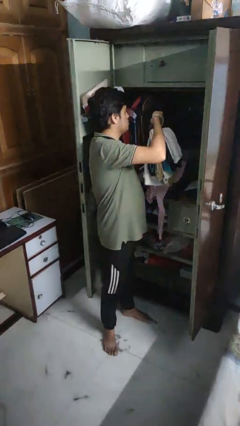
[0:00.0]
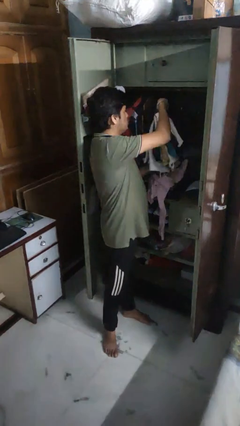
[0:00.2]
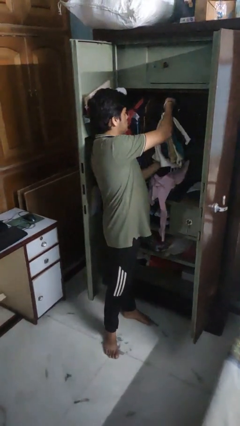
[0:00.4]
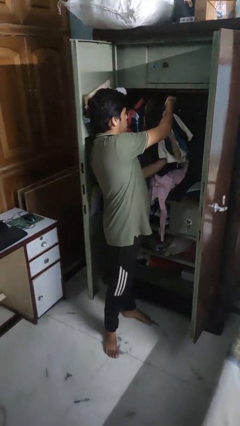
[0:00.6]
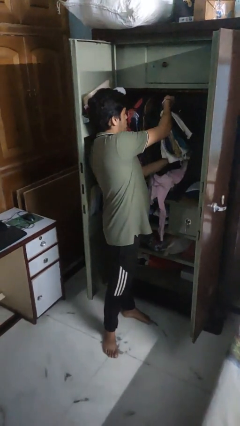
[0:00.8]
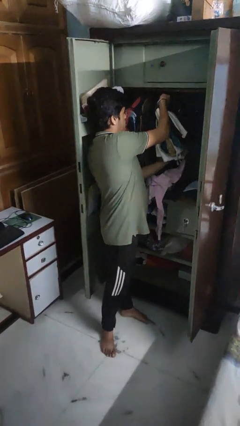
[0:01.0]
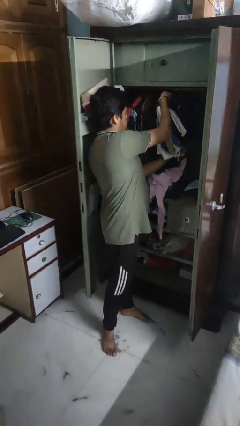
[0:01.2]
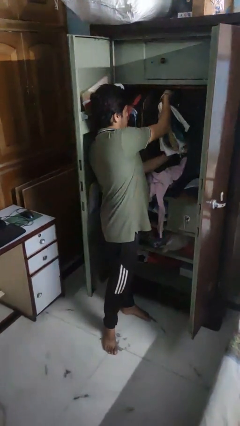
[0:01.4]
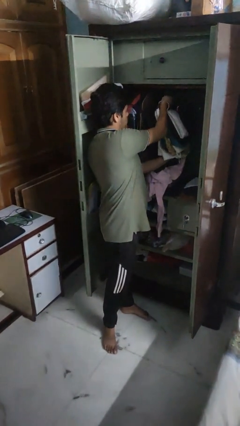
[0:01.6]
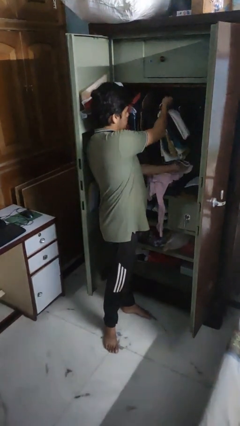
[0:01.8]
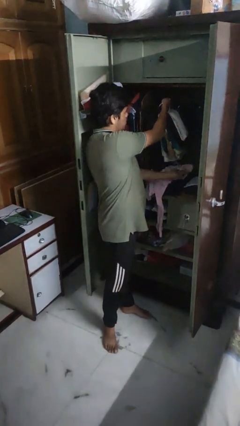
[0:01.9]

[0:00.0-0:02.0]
person puts clothes into closet

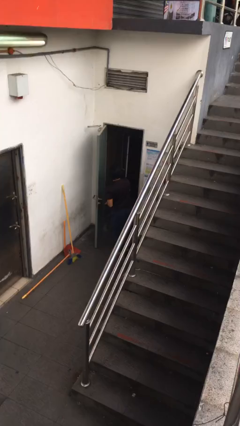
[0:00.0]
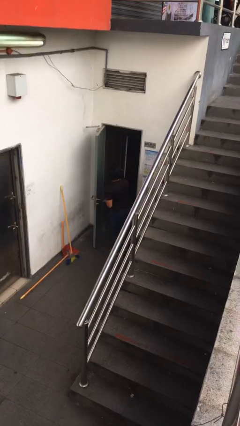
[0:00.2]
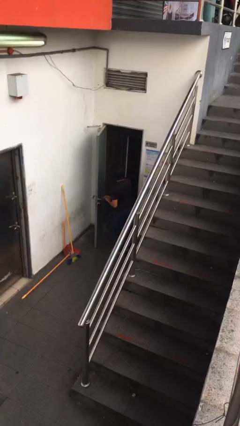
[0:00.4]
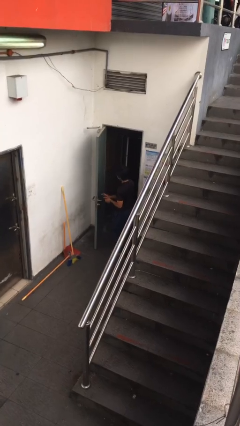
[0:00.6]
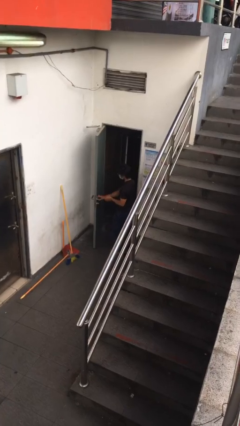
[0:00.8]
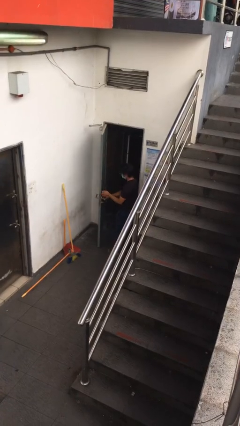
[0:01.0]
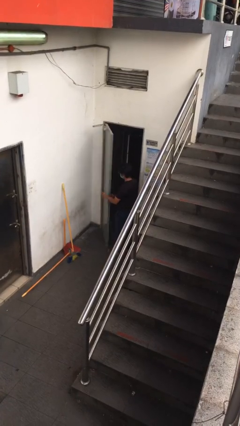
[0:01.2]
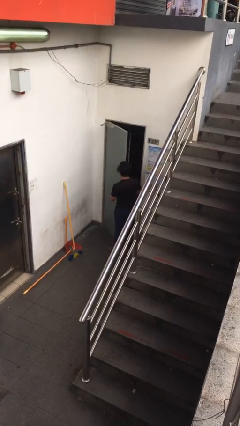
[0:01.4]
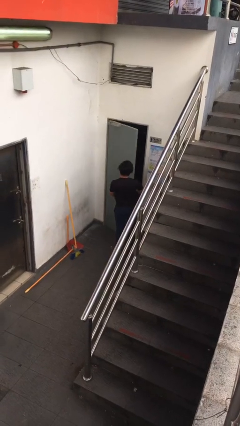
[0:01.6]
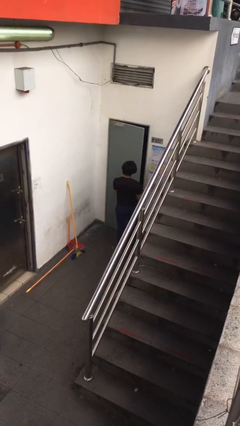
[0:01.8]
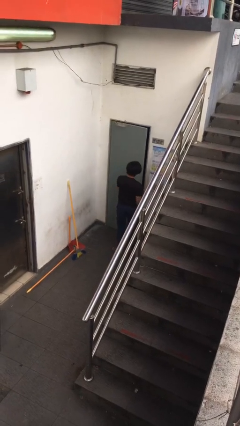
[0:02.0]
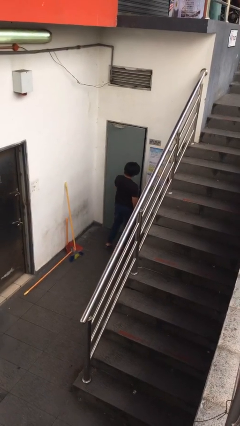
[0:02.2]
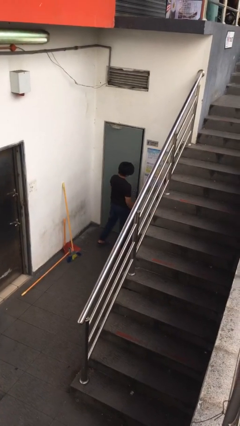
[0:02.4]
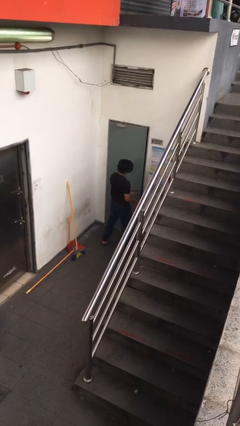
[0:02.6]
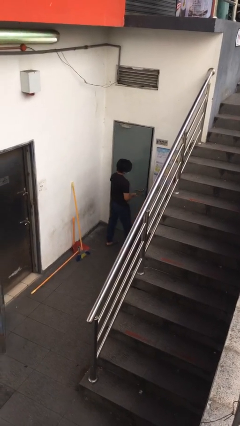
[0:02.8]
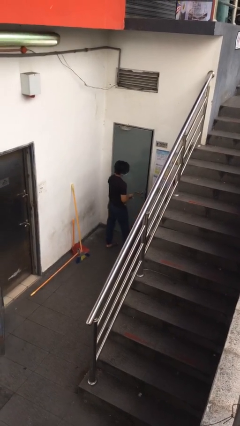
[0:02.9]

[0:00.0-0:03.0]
person closes facility door

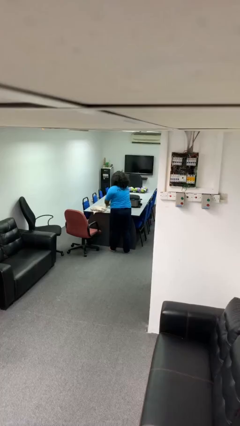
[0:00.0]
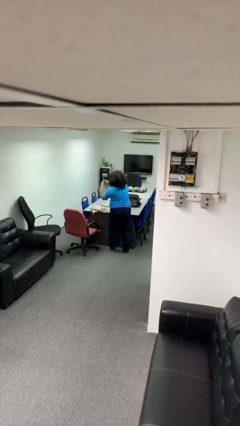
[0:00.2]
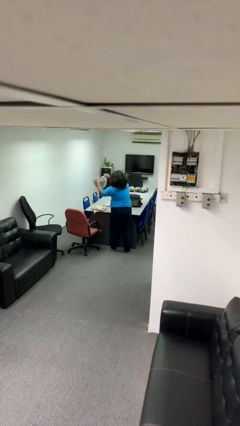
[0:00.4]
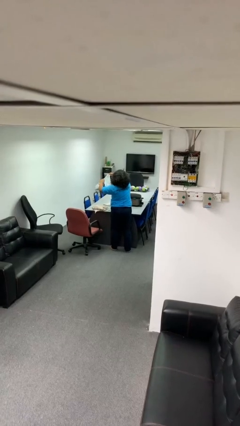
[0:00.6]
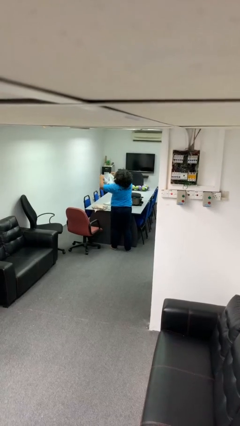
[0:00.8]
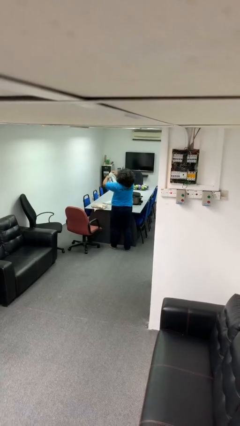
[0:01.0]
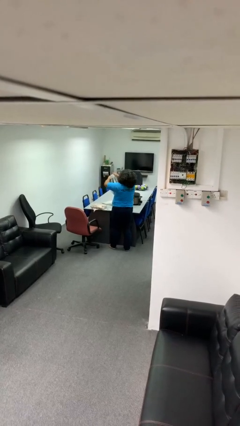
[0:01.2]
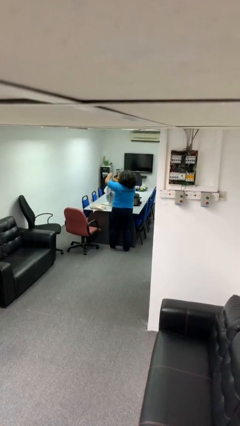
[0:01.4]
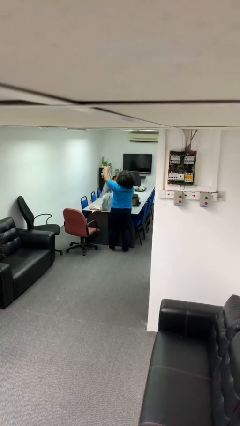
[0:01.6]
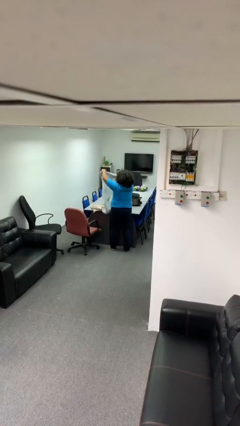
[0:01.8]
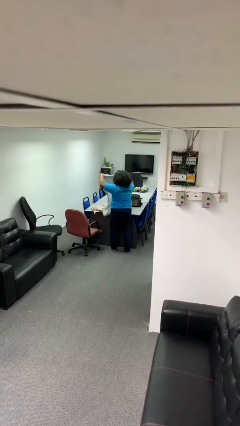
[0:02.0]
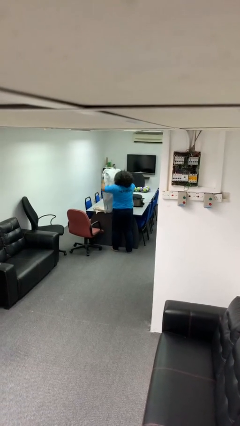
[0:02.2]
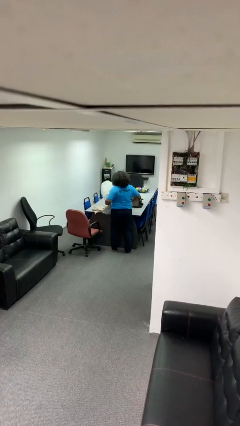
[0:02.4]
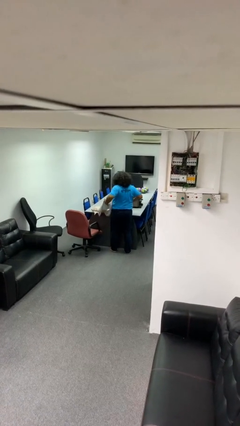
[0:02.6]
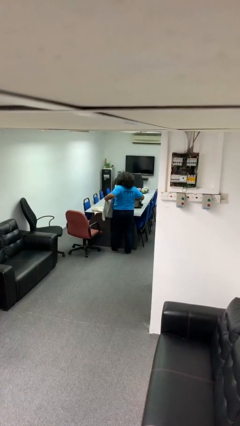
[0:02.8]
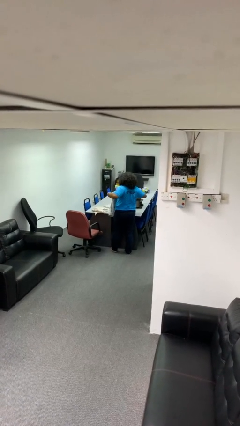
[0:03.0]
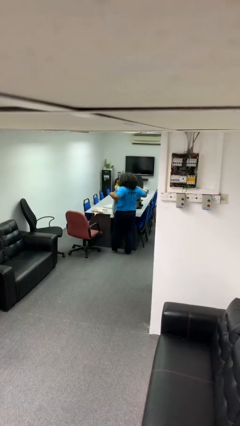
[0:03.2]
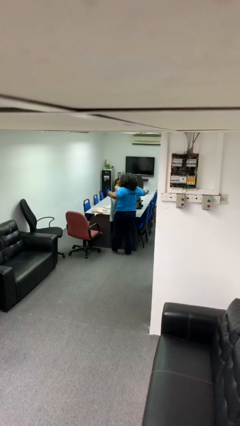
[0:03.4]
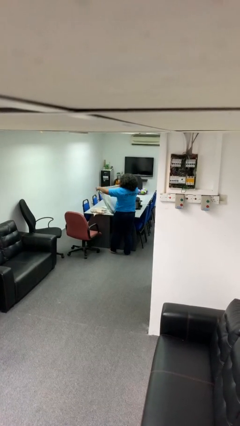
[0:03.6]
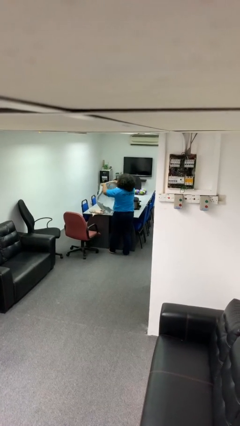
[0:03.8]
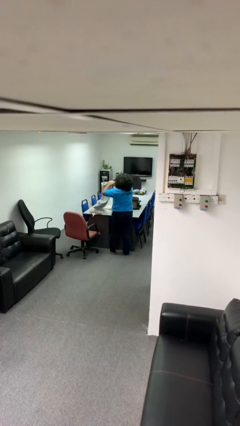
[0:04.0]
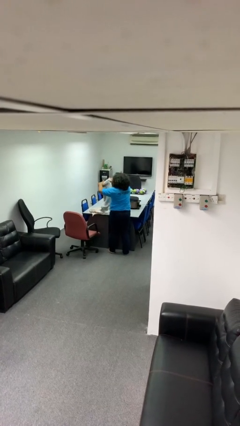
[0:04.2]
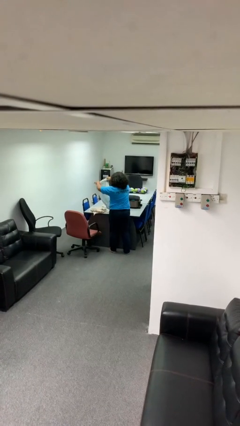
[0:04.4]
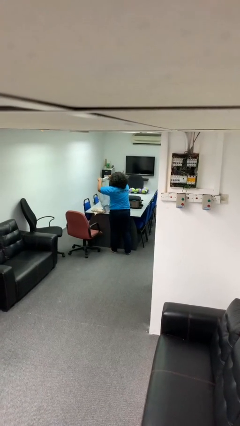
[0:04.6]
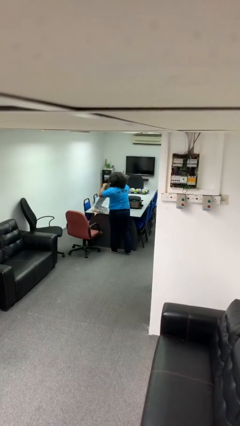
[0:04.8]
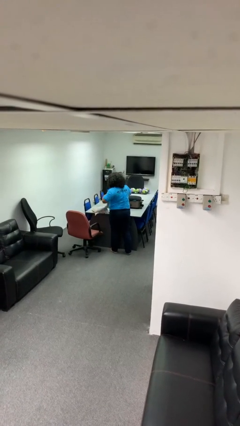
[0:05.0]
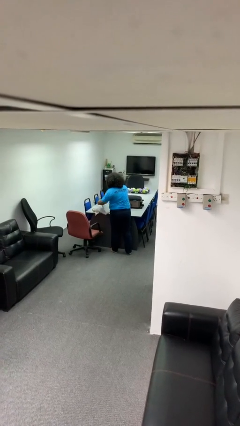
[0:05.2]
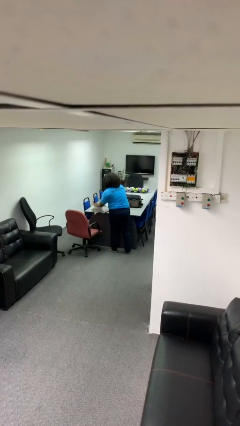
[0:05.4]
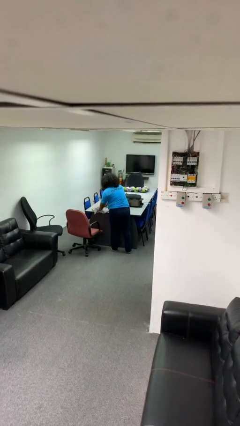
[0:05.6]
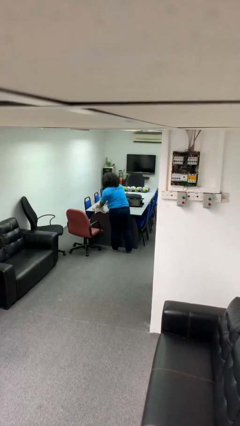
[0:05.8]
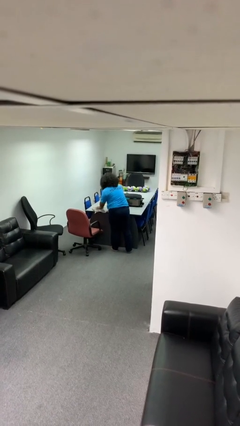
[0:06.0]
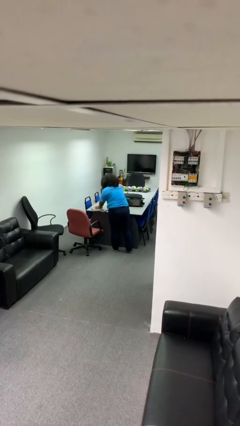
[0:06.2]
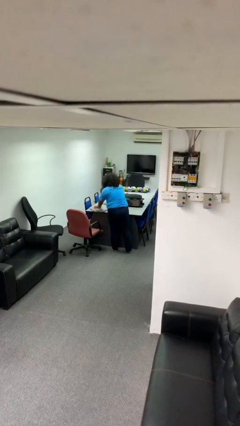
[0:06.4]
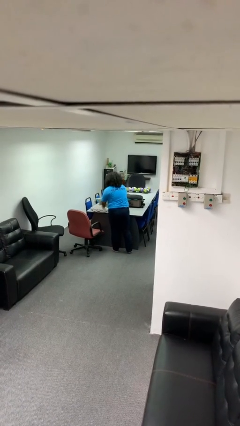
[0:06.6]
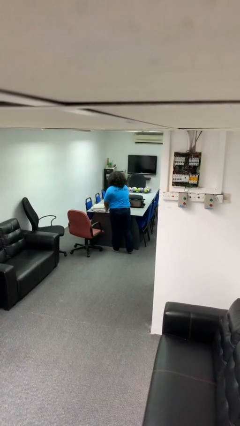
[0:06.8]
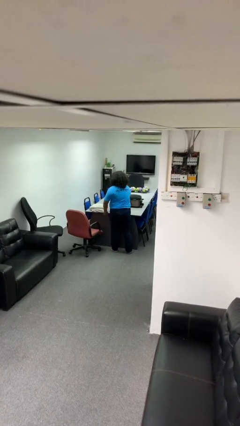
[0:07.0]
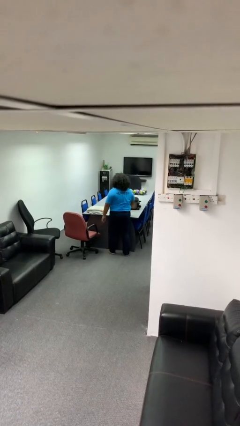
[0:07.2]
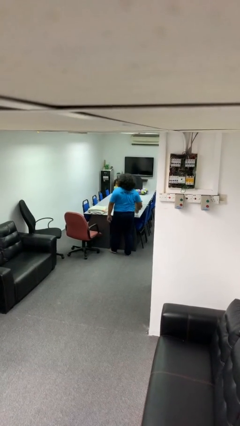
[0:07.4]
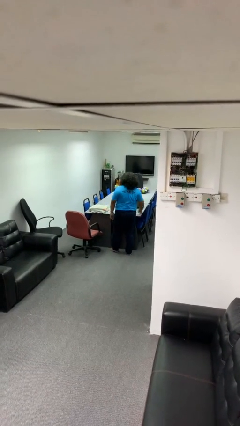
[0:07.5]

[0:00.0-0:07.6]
person folds towel

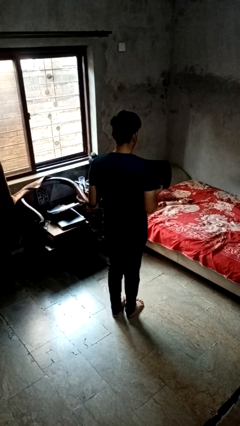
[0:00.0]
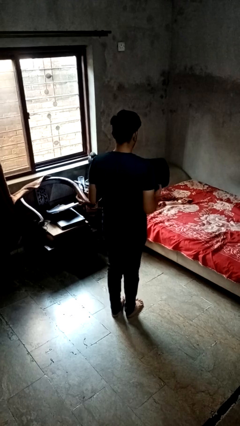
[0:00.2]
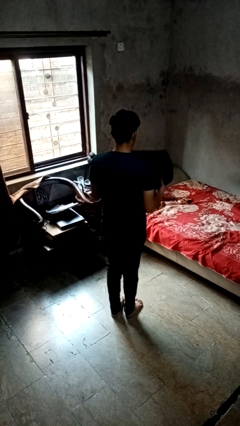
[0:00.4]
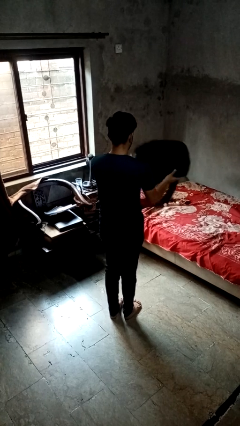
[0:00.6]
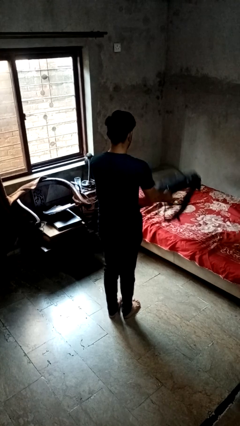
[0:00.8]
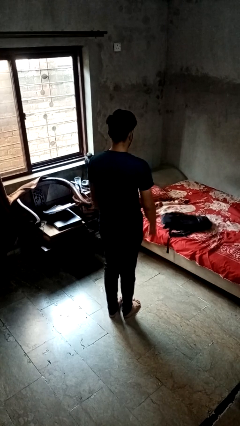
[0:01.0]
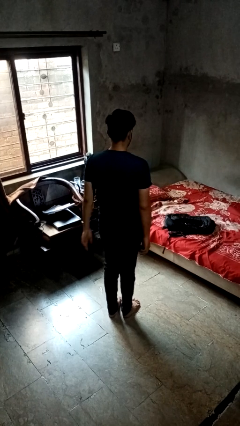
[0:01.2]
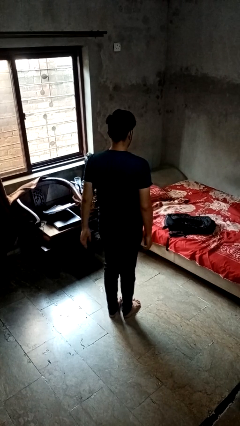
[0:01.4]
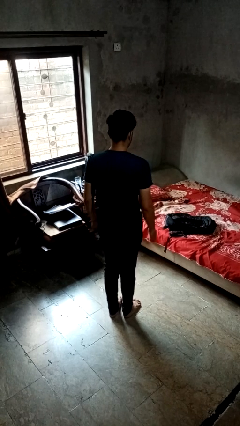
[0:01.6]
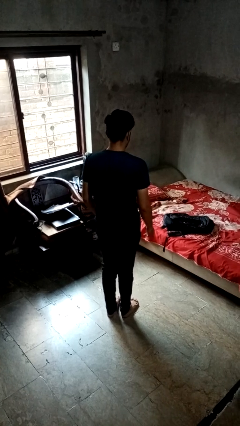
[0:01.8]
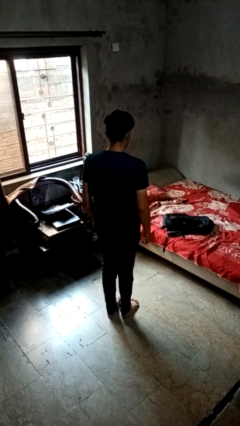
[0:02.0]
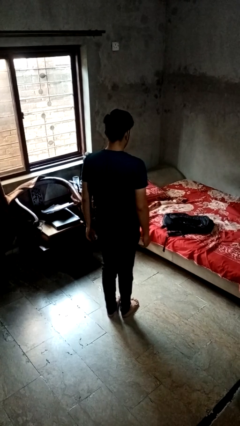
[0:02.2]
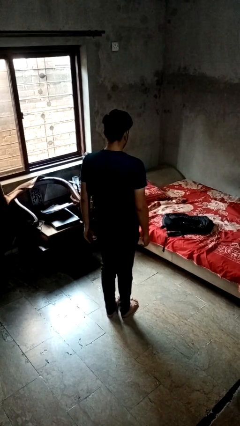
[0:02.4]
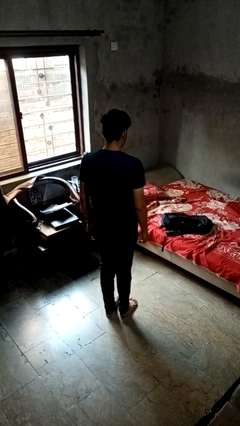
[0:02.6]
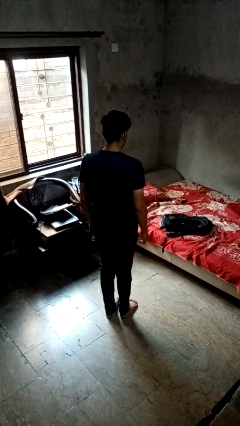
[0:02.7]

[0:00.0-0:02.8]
person throws object on bed

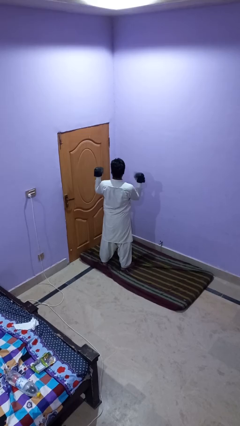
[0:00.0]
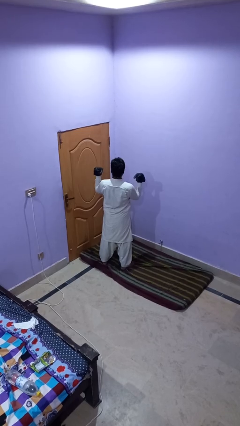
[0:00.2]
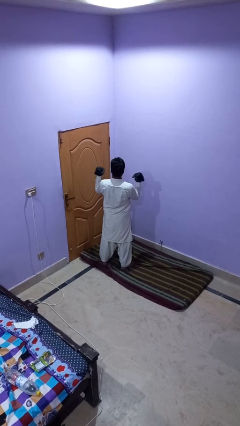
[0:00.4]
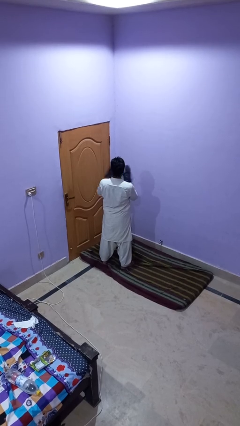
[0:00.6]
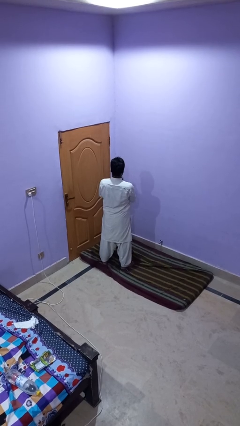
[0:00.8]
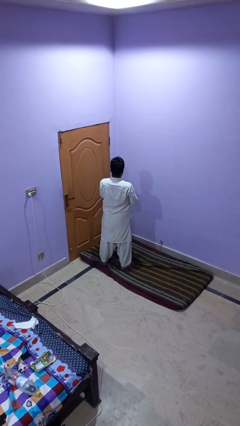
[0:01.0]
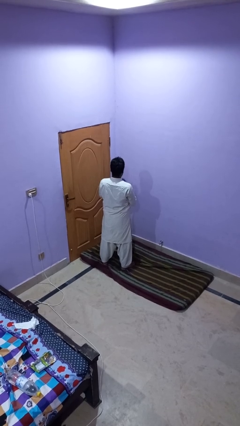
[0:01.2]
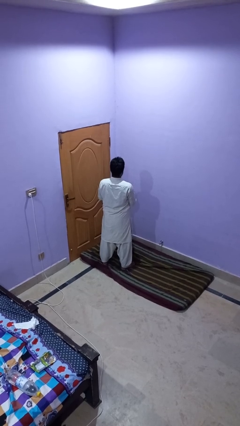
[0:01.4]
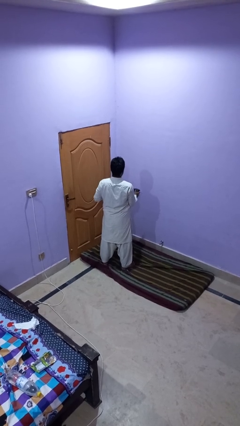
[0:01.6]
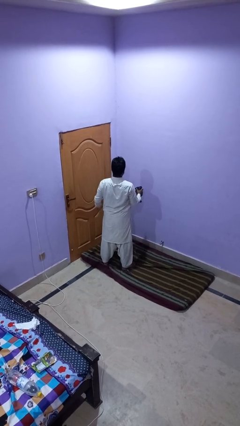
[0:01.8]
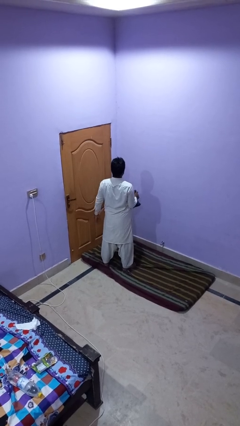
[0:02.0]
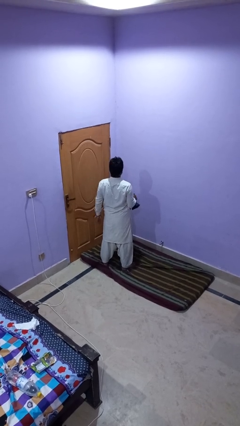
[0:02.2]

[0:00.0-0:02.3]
person takes off gloves
